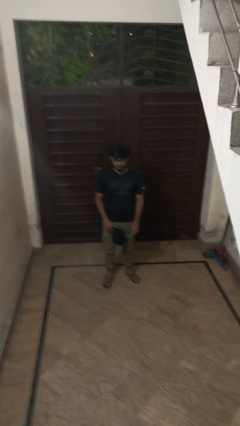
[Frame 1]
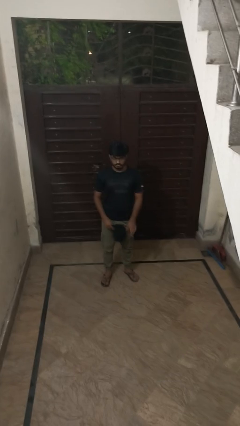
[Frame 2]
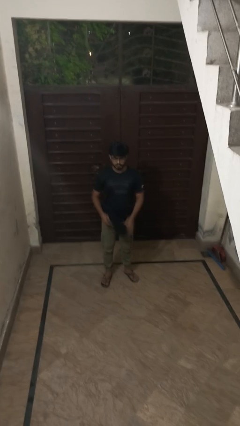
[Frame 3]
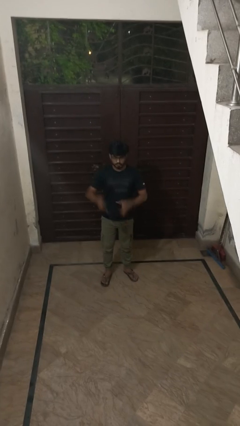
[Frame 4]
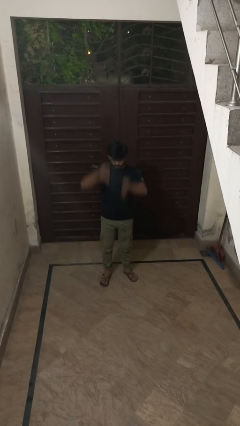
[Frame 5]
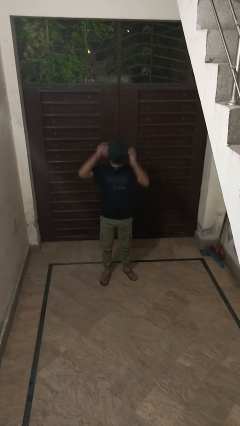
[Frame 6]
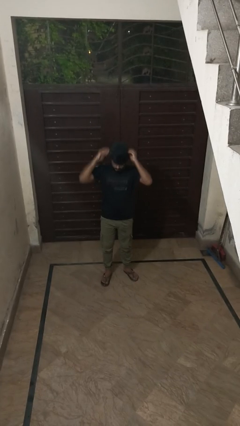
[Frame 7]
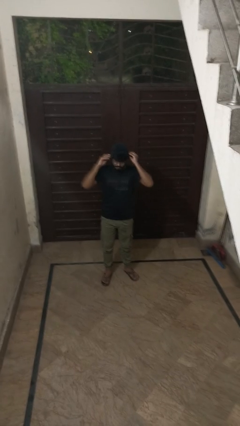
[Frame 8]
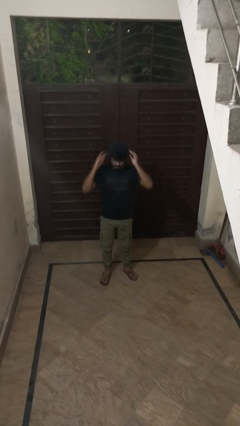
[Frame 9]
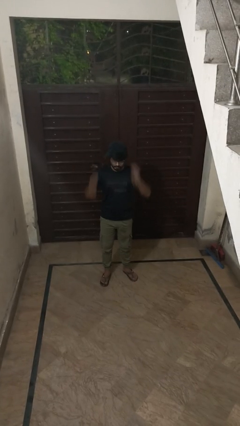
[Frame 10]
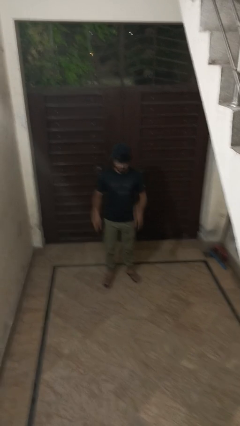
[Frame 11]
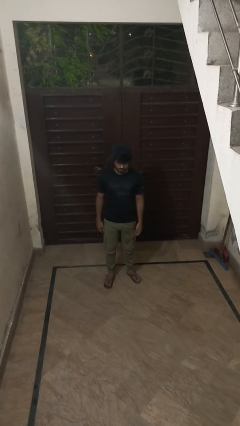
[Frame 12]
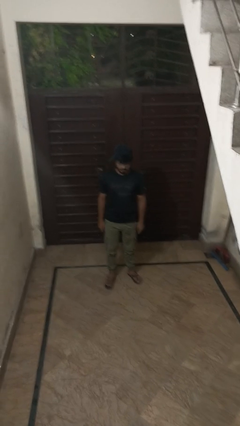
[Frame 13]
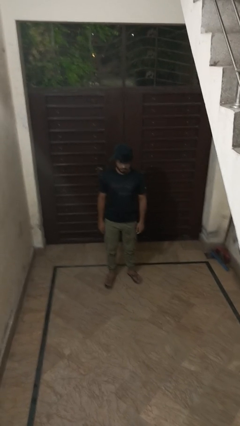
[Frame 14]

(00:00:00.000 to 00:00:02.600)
person puts on hat

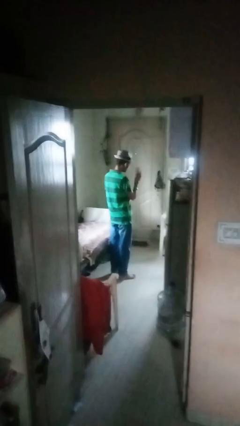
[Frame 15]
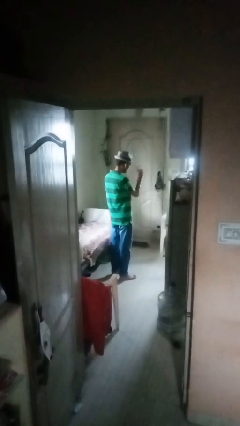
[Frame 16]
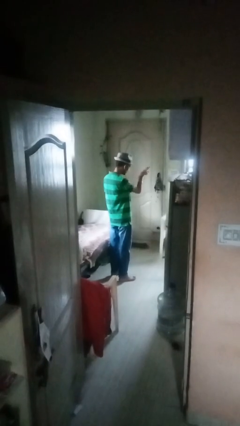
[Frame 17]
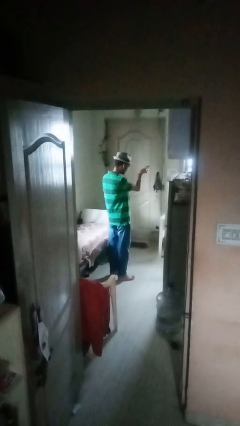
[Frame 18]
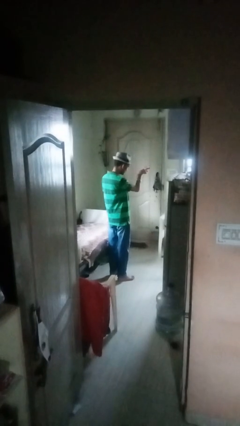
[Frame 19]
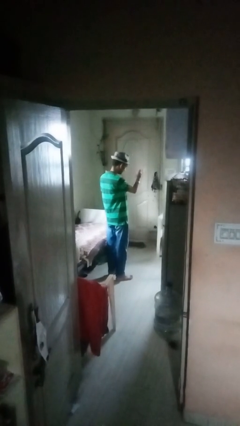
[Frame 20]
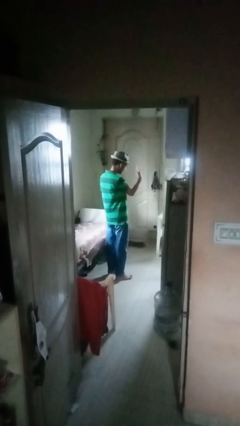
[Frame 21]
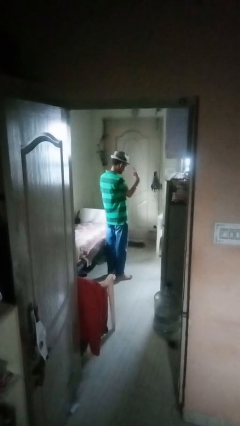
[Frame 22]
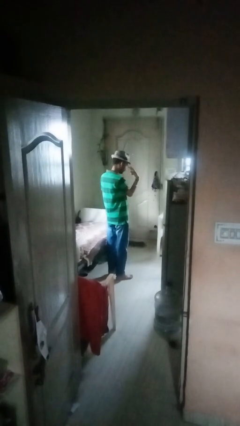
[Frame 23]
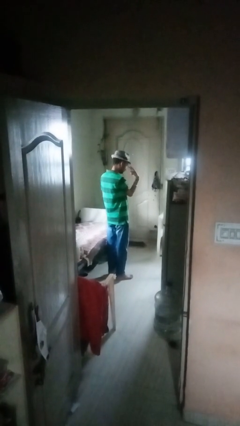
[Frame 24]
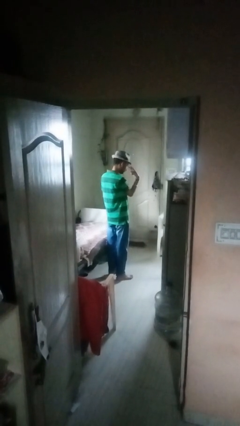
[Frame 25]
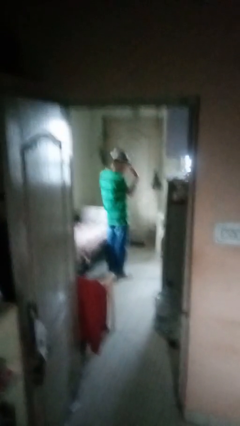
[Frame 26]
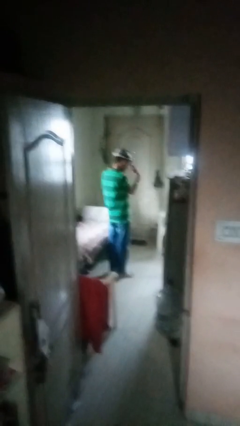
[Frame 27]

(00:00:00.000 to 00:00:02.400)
person gestures watch closely

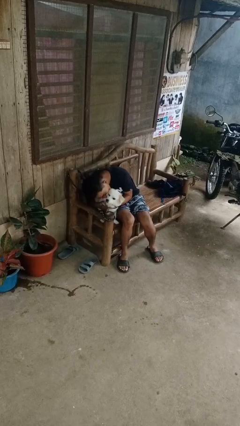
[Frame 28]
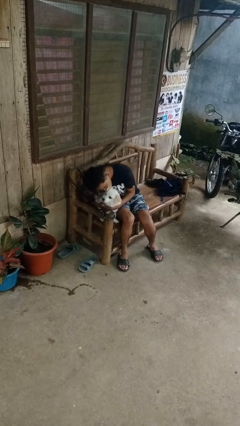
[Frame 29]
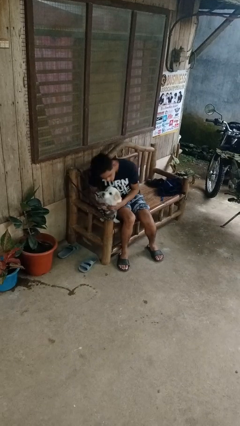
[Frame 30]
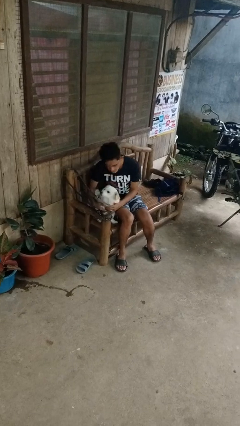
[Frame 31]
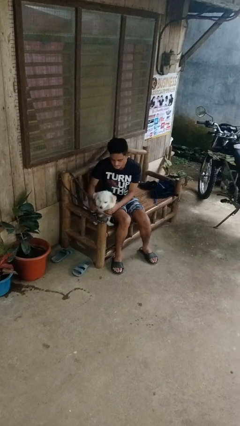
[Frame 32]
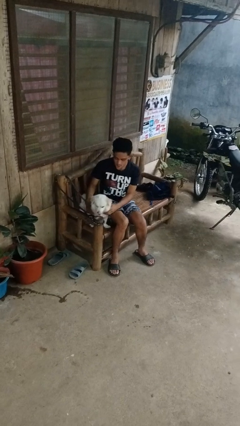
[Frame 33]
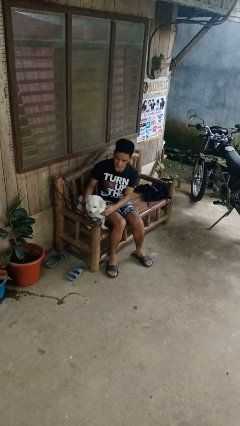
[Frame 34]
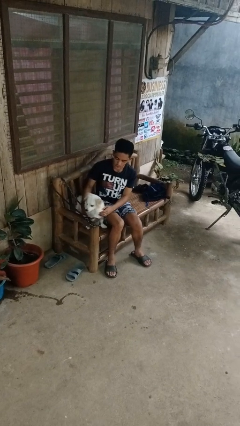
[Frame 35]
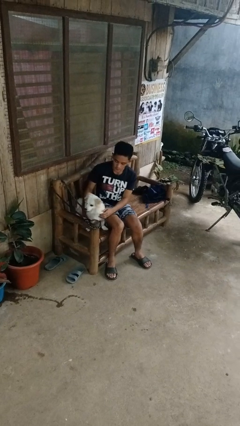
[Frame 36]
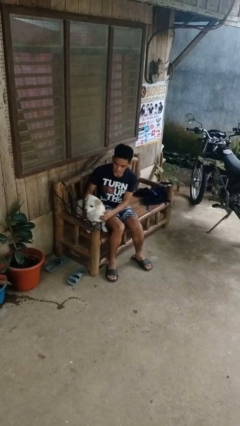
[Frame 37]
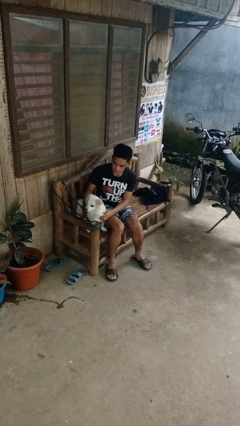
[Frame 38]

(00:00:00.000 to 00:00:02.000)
person hugs dog

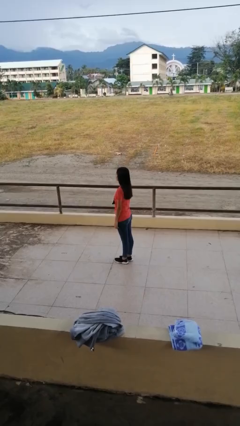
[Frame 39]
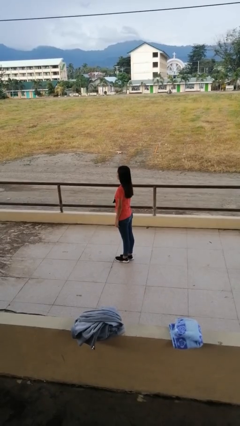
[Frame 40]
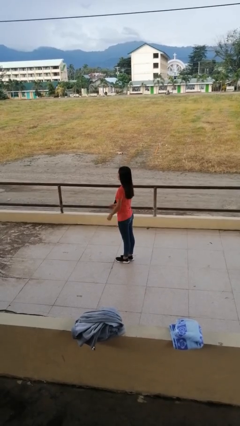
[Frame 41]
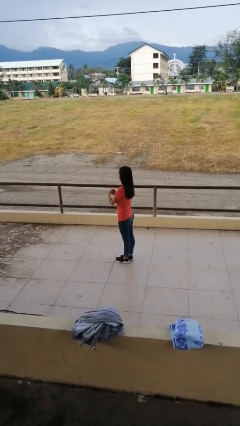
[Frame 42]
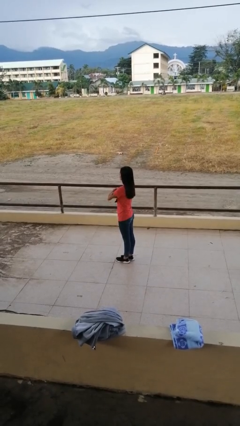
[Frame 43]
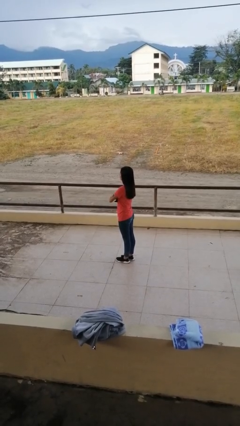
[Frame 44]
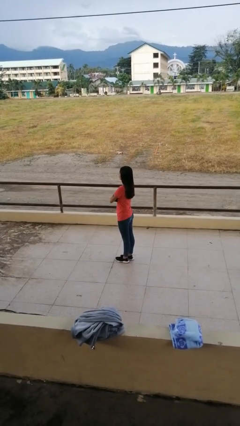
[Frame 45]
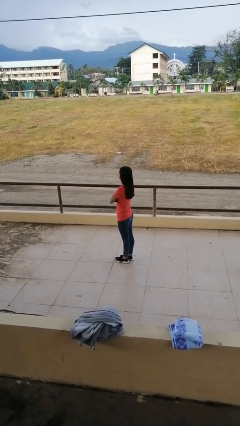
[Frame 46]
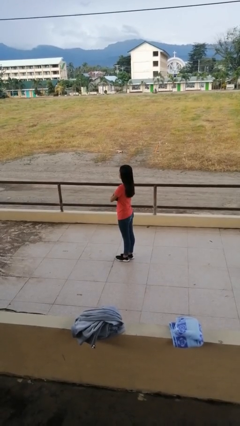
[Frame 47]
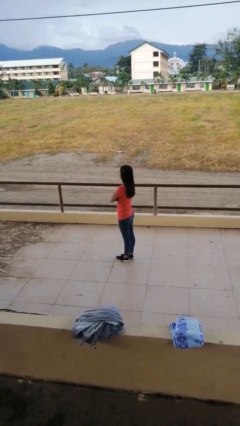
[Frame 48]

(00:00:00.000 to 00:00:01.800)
person crosses arms

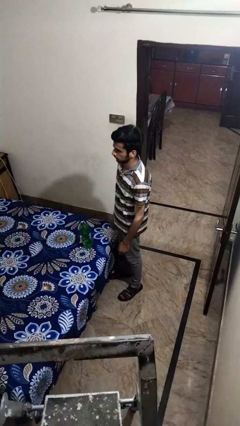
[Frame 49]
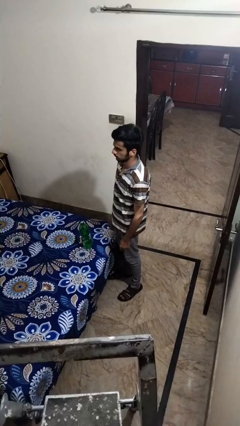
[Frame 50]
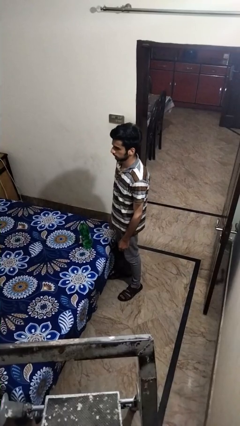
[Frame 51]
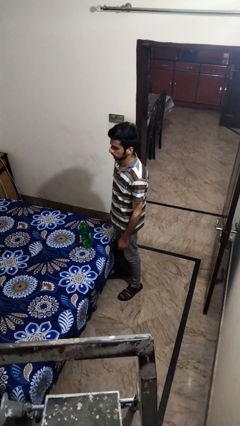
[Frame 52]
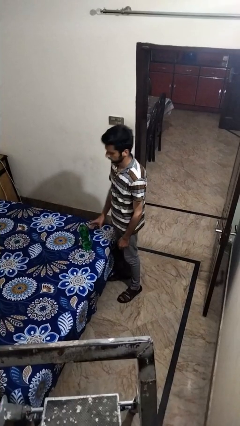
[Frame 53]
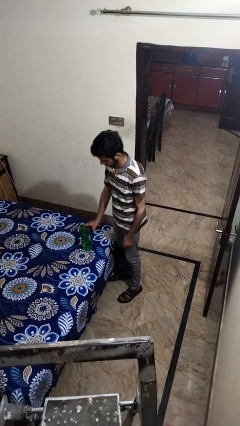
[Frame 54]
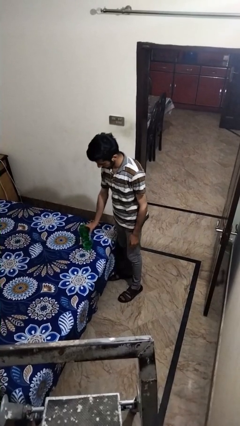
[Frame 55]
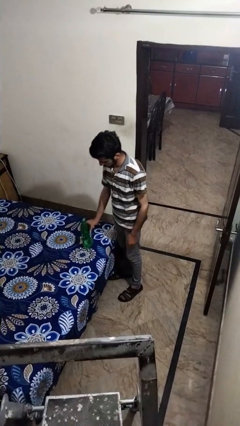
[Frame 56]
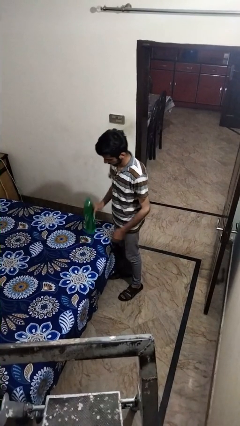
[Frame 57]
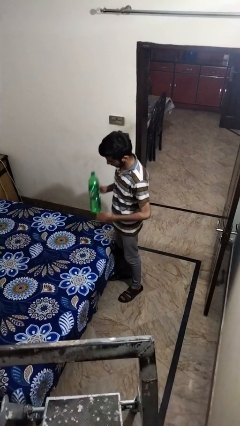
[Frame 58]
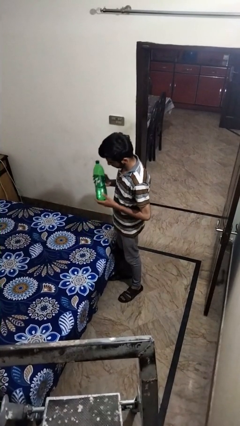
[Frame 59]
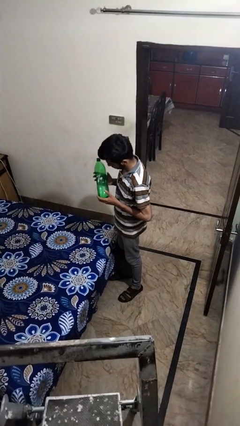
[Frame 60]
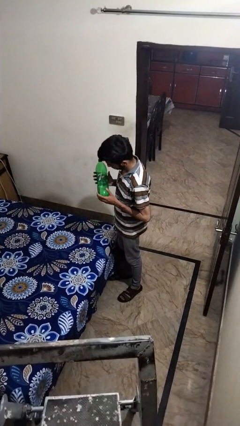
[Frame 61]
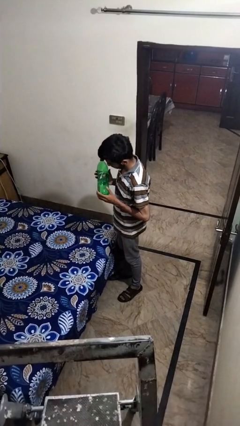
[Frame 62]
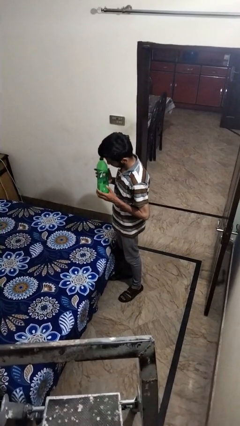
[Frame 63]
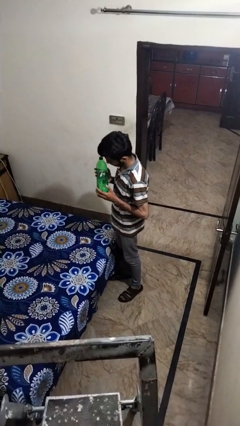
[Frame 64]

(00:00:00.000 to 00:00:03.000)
person picks up object from bed

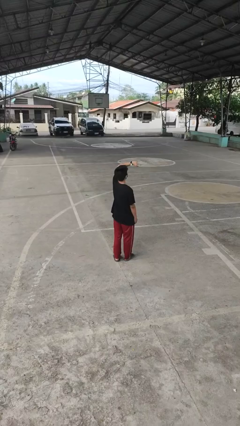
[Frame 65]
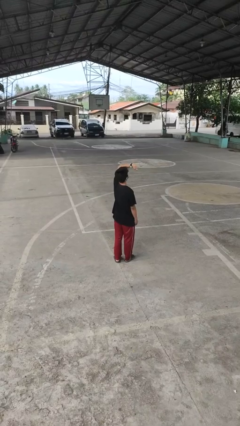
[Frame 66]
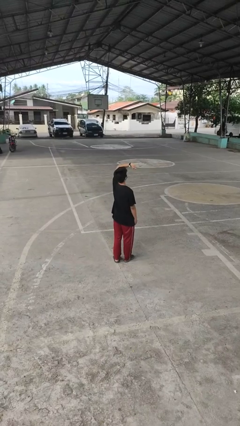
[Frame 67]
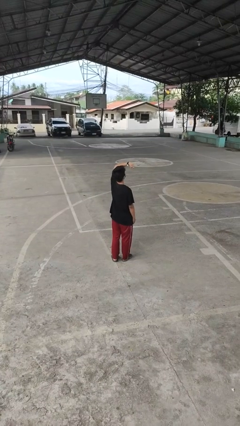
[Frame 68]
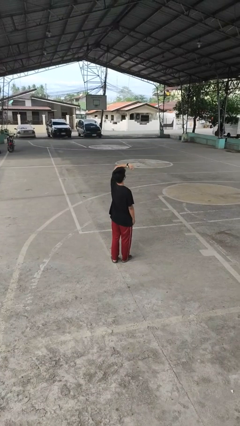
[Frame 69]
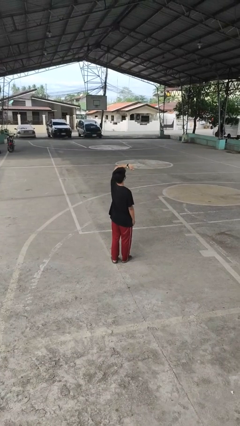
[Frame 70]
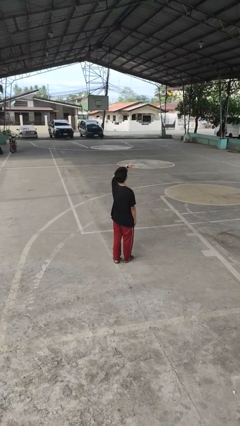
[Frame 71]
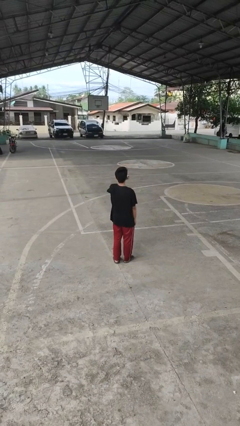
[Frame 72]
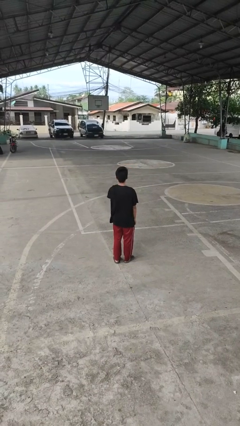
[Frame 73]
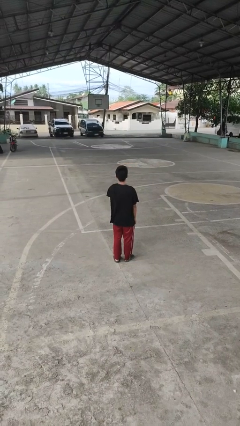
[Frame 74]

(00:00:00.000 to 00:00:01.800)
person looks at wristwatch

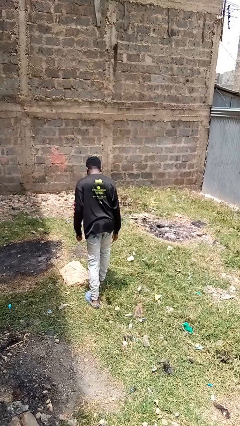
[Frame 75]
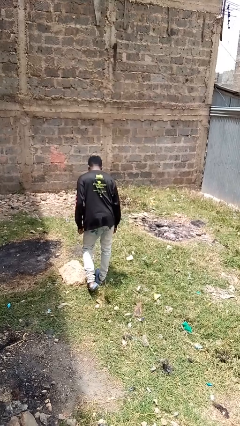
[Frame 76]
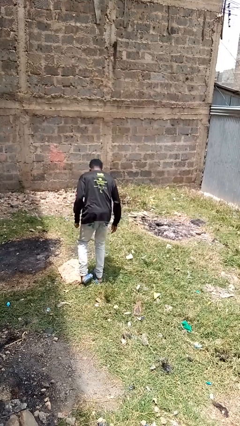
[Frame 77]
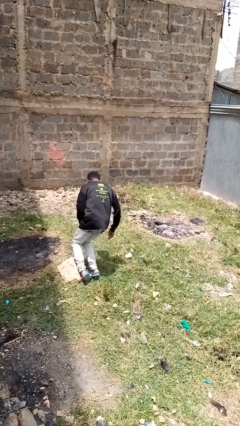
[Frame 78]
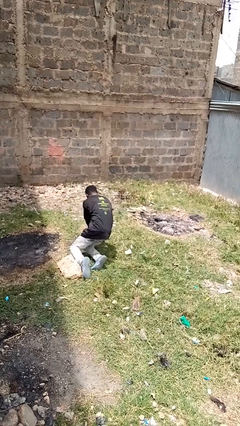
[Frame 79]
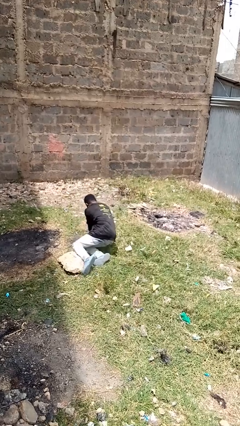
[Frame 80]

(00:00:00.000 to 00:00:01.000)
person trips on object on floor

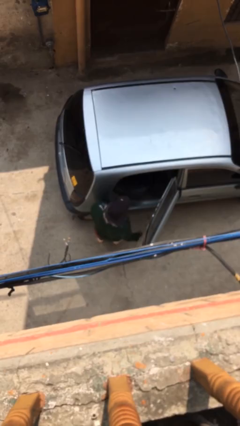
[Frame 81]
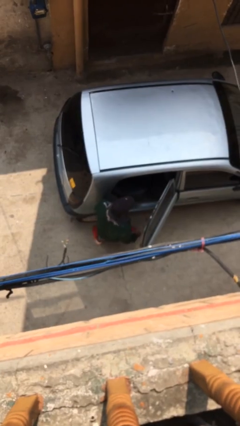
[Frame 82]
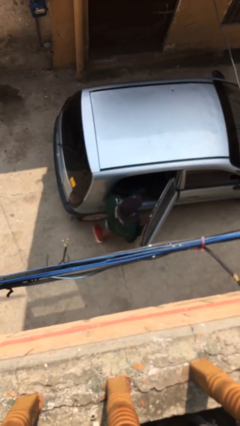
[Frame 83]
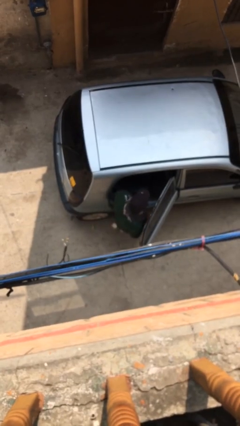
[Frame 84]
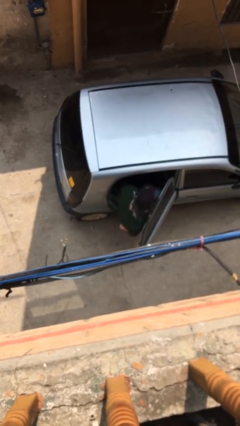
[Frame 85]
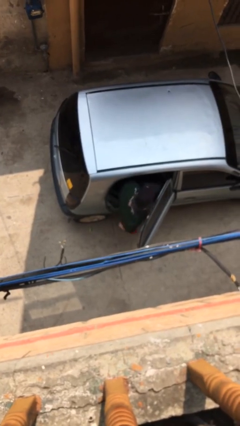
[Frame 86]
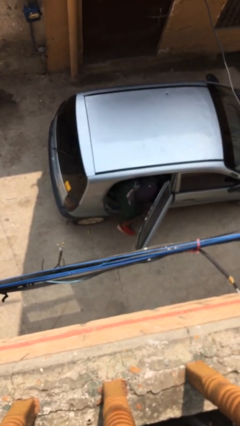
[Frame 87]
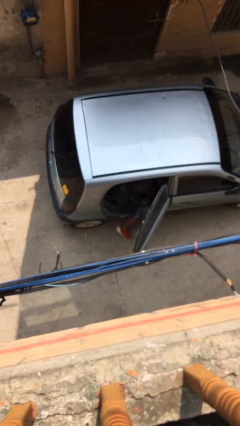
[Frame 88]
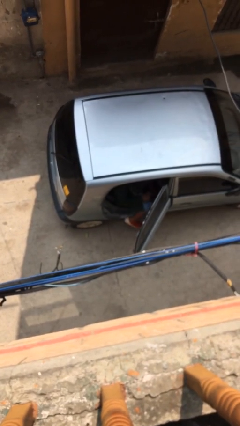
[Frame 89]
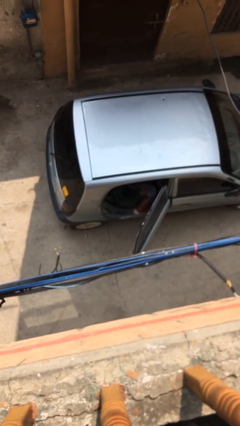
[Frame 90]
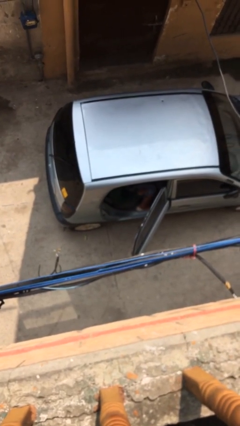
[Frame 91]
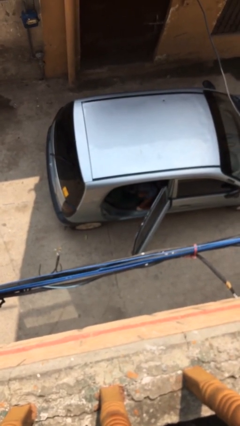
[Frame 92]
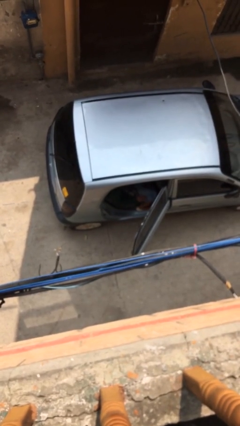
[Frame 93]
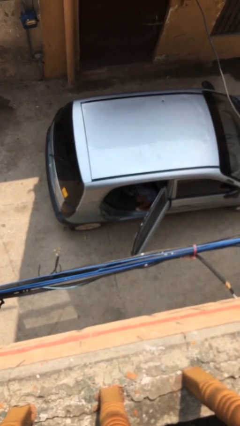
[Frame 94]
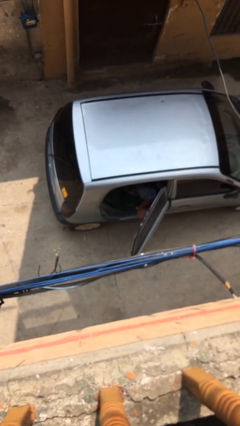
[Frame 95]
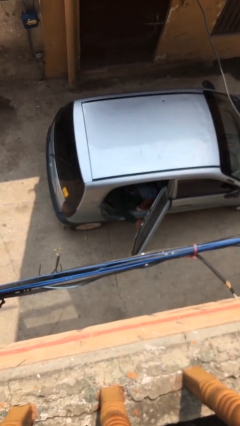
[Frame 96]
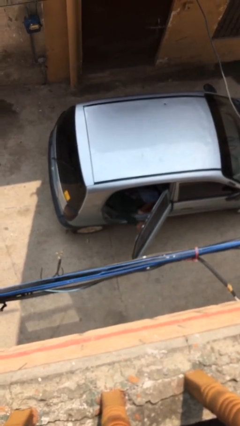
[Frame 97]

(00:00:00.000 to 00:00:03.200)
person enters car
